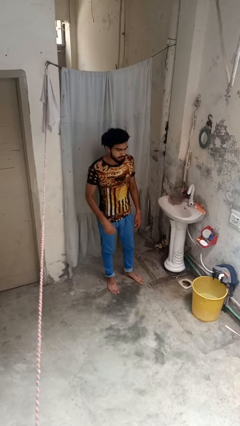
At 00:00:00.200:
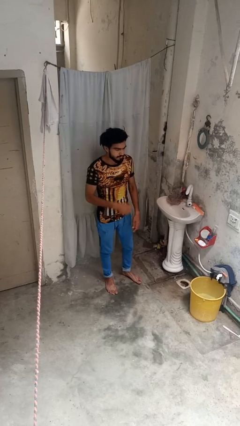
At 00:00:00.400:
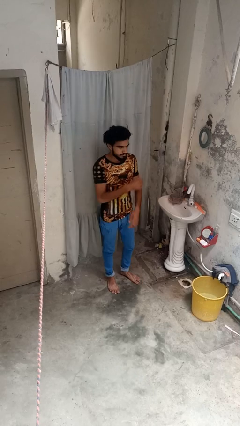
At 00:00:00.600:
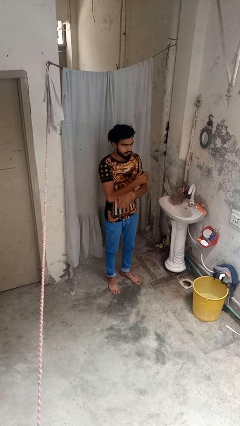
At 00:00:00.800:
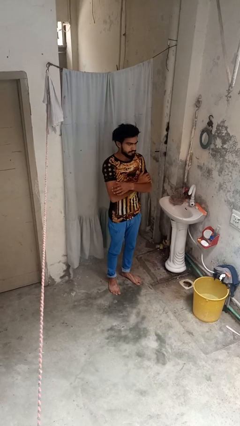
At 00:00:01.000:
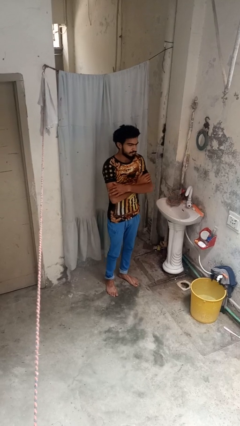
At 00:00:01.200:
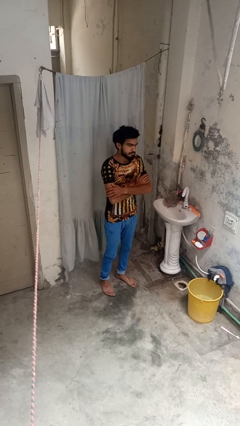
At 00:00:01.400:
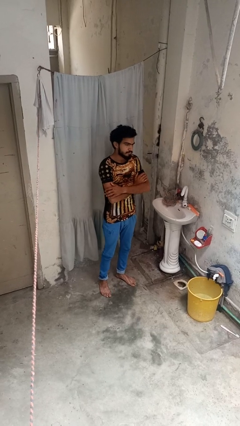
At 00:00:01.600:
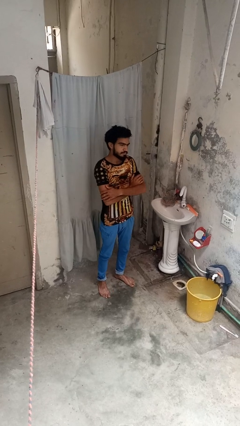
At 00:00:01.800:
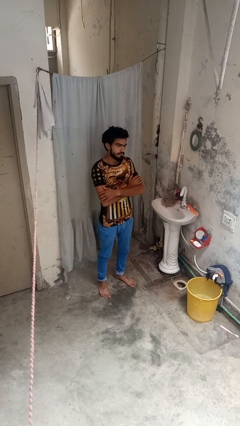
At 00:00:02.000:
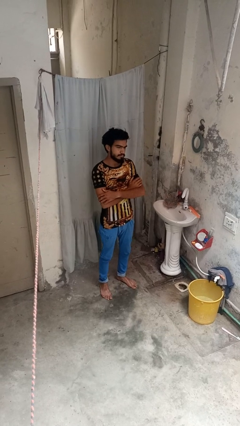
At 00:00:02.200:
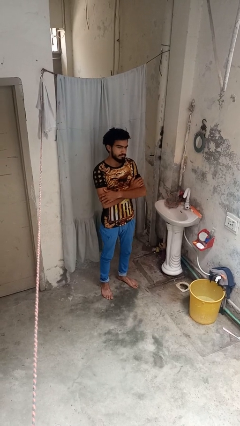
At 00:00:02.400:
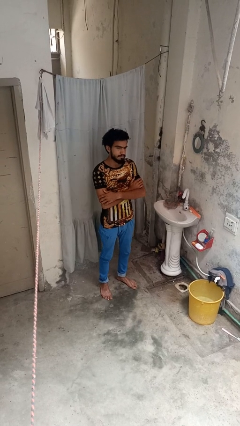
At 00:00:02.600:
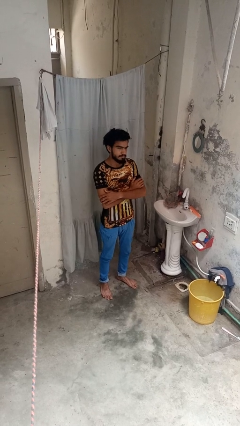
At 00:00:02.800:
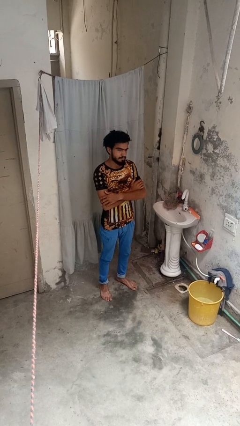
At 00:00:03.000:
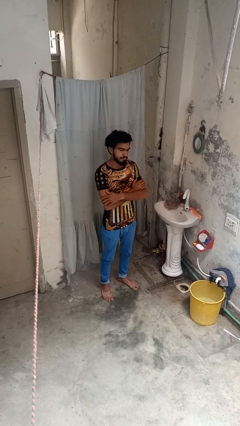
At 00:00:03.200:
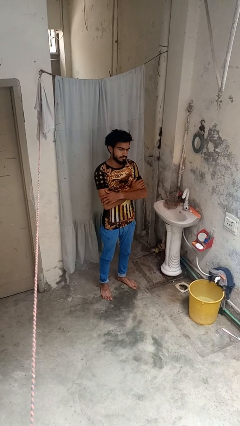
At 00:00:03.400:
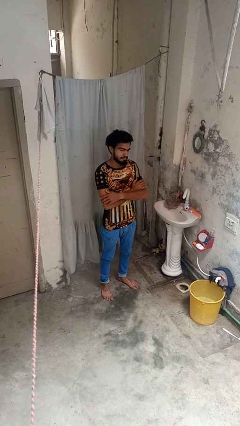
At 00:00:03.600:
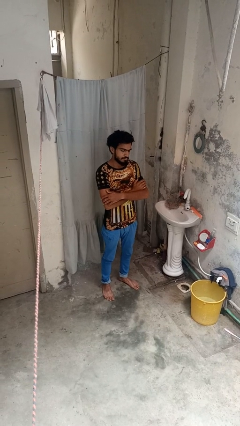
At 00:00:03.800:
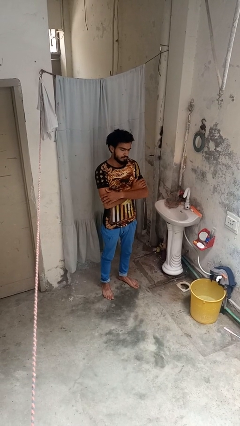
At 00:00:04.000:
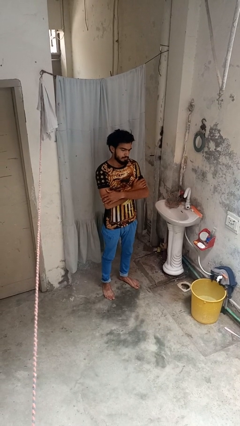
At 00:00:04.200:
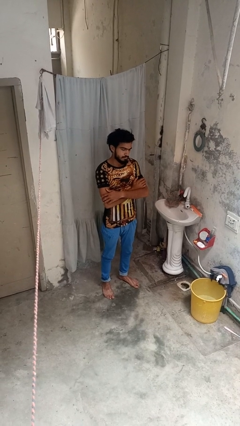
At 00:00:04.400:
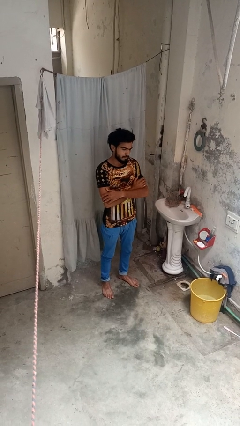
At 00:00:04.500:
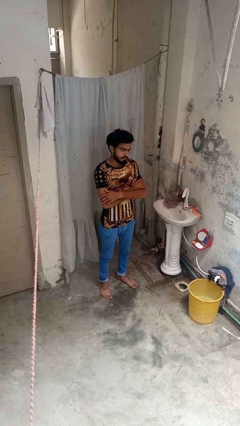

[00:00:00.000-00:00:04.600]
person crosses arms

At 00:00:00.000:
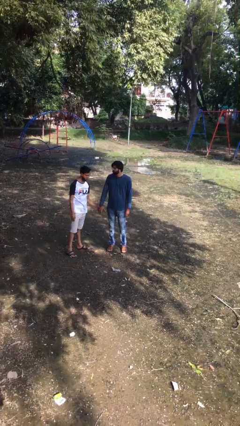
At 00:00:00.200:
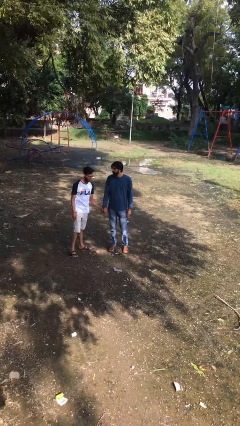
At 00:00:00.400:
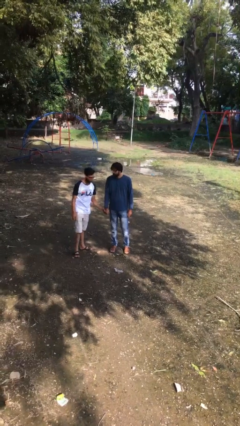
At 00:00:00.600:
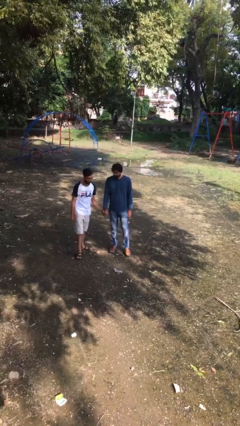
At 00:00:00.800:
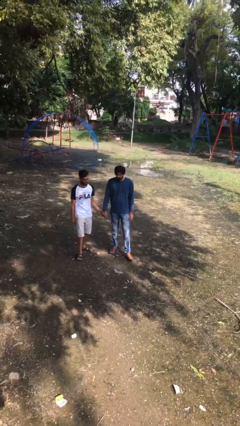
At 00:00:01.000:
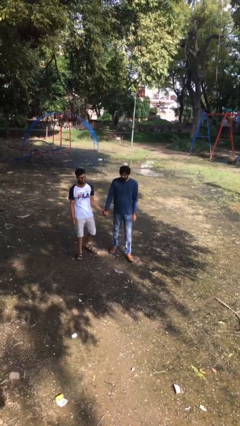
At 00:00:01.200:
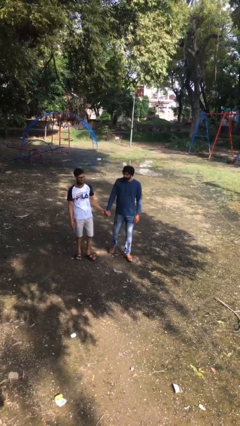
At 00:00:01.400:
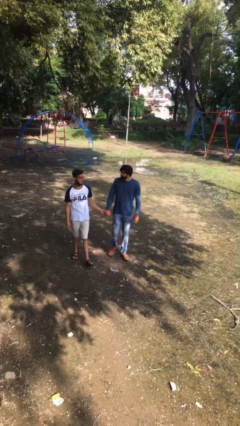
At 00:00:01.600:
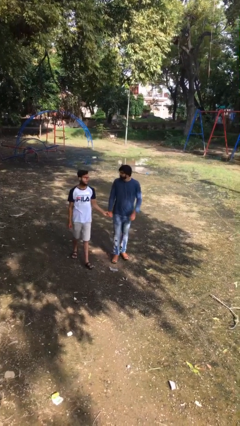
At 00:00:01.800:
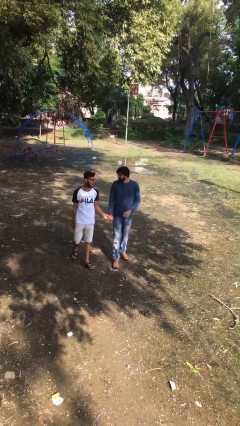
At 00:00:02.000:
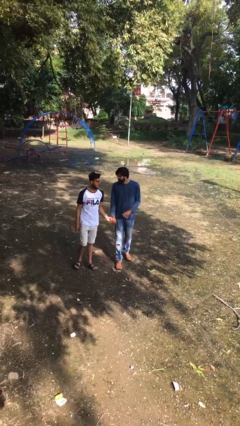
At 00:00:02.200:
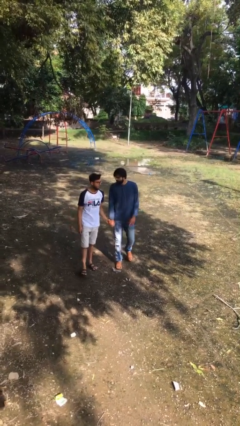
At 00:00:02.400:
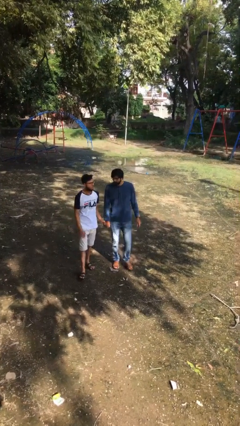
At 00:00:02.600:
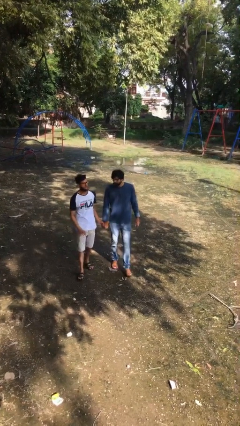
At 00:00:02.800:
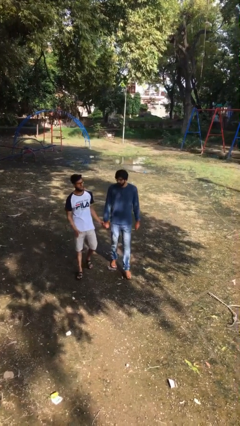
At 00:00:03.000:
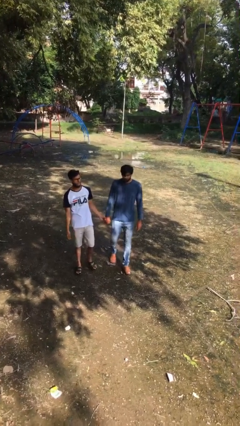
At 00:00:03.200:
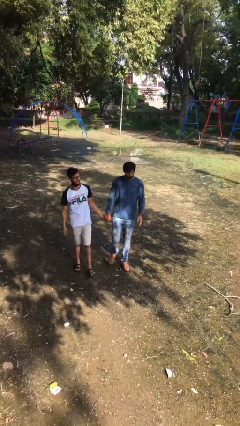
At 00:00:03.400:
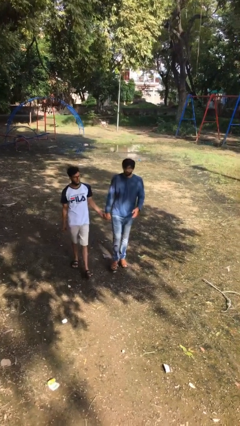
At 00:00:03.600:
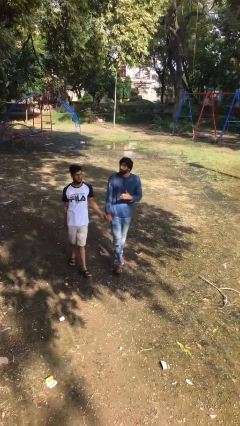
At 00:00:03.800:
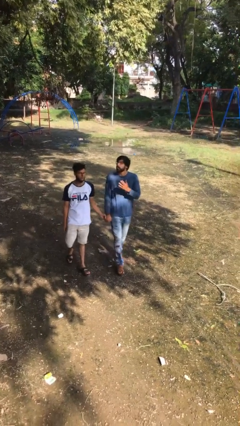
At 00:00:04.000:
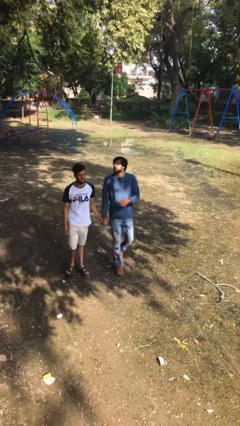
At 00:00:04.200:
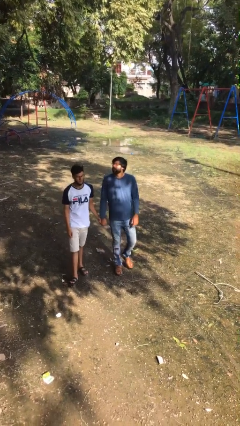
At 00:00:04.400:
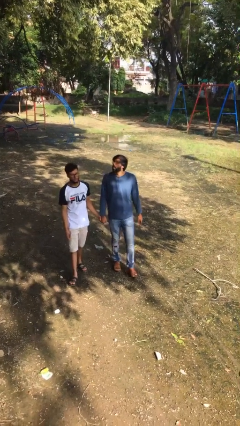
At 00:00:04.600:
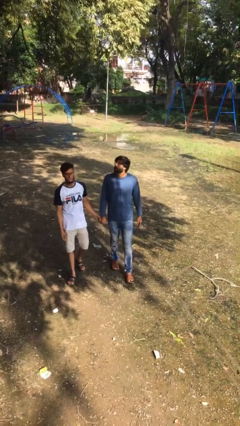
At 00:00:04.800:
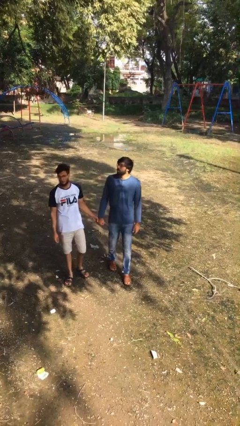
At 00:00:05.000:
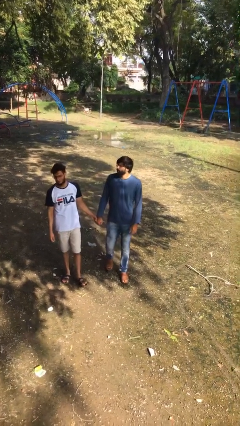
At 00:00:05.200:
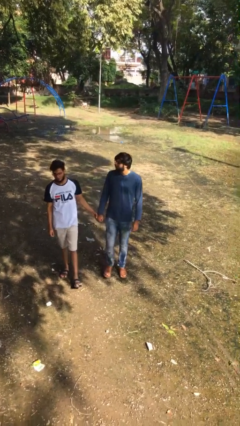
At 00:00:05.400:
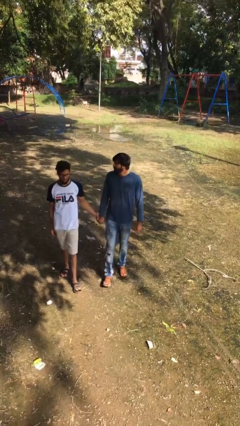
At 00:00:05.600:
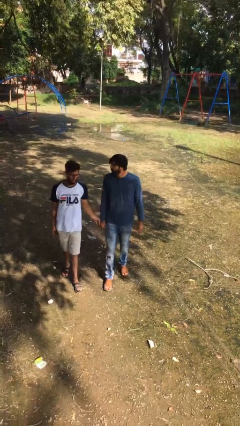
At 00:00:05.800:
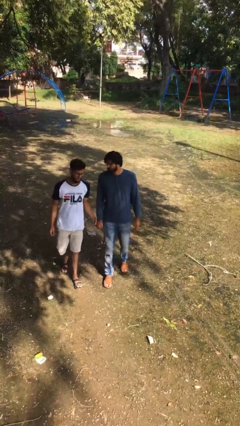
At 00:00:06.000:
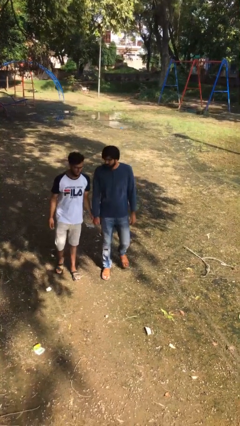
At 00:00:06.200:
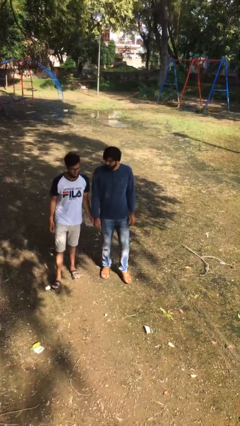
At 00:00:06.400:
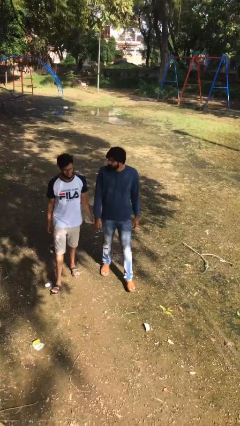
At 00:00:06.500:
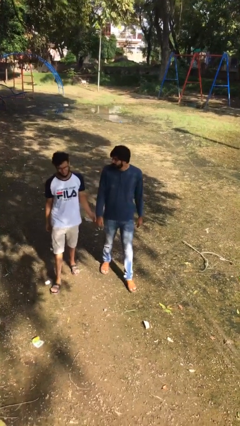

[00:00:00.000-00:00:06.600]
person holds hand

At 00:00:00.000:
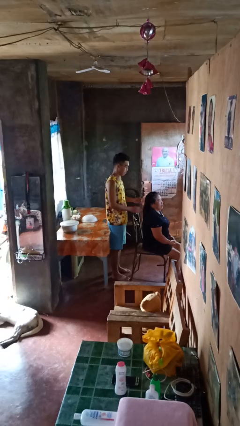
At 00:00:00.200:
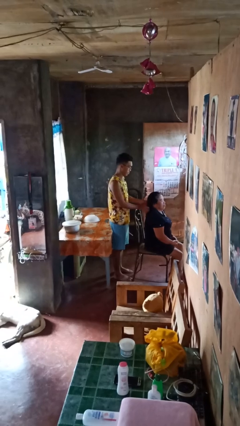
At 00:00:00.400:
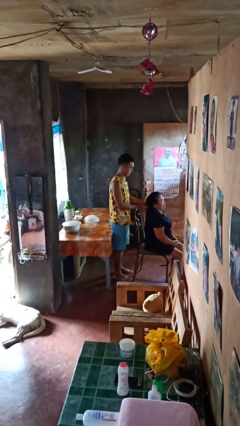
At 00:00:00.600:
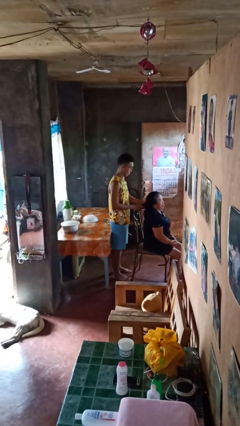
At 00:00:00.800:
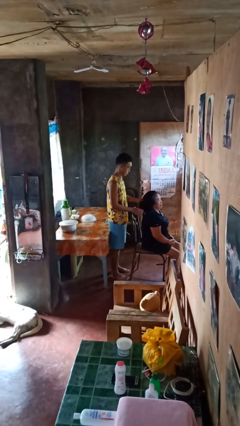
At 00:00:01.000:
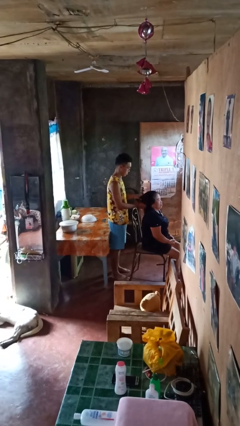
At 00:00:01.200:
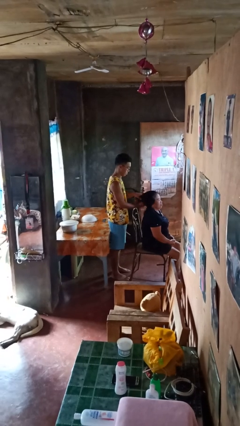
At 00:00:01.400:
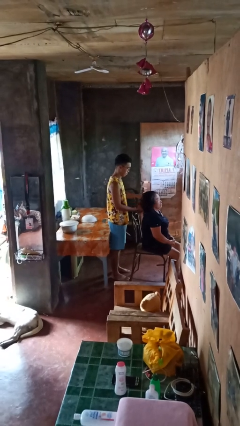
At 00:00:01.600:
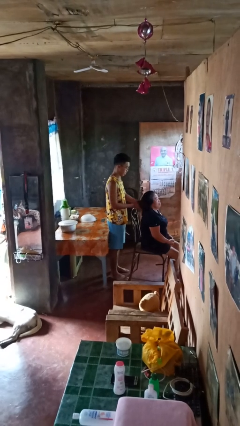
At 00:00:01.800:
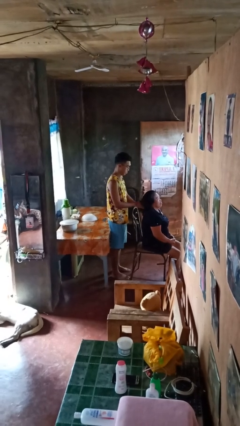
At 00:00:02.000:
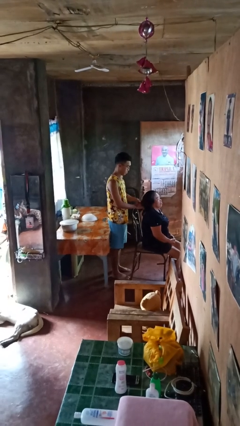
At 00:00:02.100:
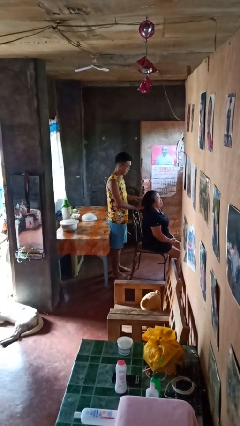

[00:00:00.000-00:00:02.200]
person braids hair of person

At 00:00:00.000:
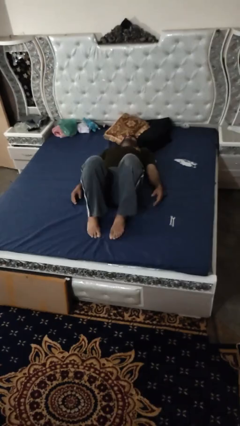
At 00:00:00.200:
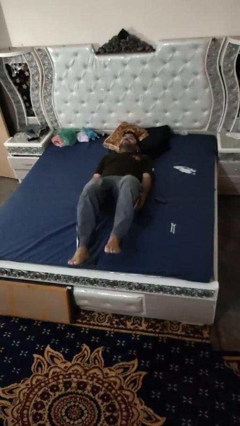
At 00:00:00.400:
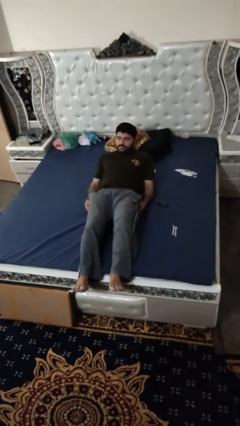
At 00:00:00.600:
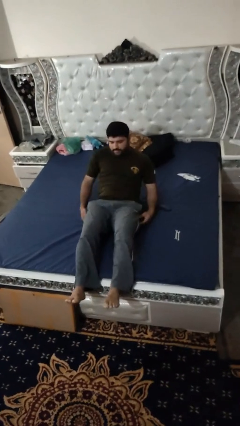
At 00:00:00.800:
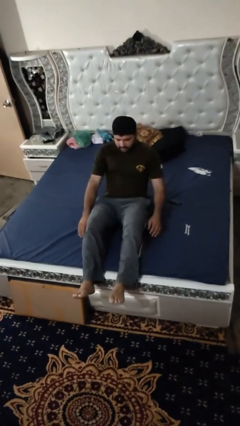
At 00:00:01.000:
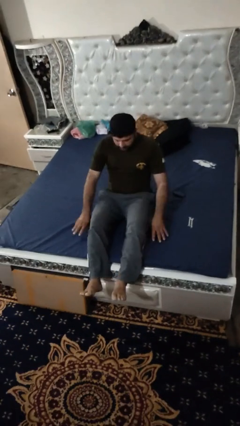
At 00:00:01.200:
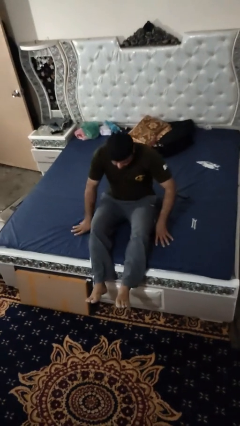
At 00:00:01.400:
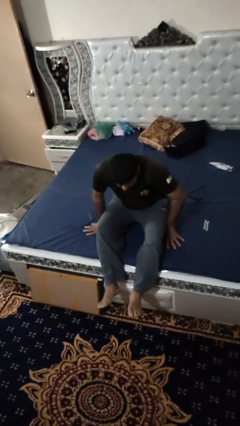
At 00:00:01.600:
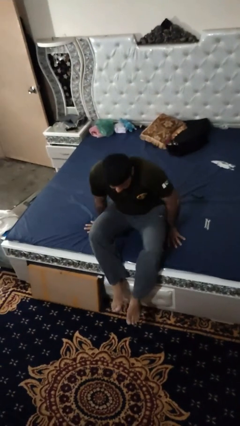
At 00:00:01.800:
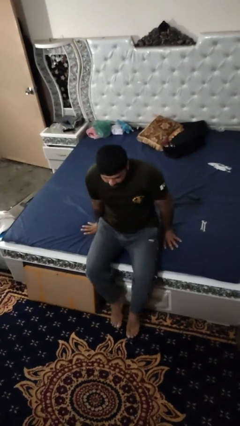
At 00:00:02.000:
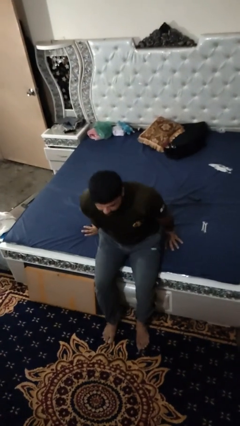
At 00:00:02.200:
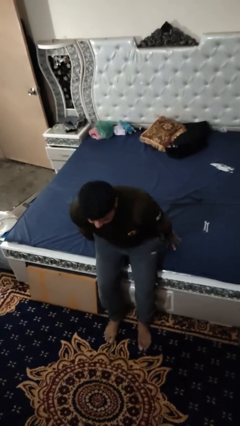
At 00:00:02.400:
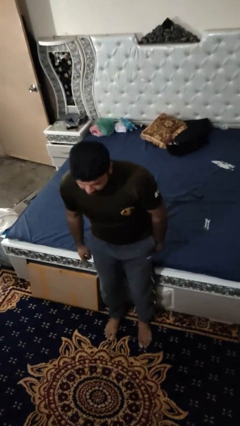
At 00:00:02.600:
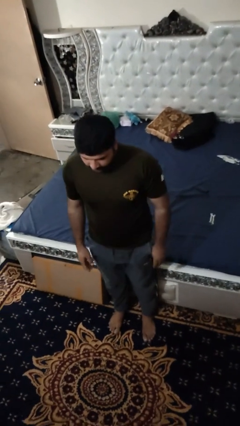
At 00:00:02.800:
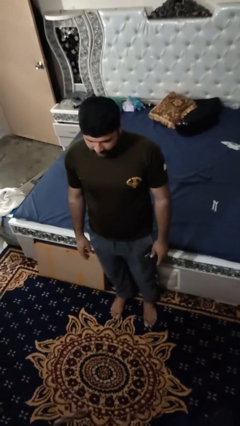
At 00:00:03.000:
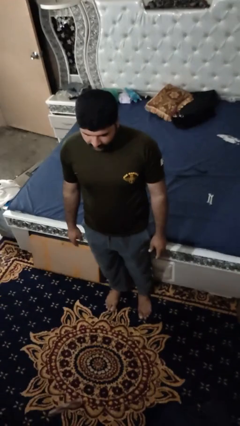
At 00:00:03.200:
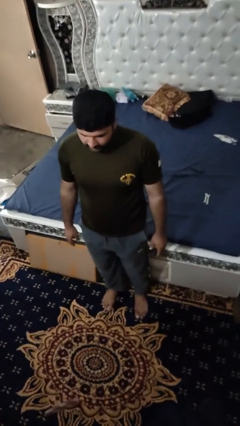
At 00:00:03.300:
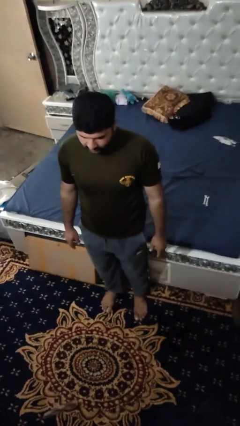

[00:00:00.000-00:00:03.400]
person stands up

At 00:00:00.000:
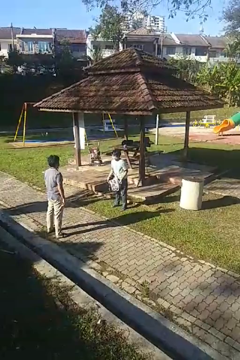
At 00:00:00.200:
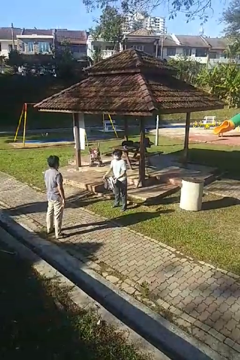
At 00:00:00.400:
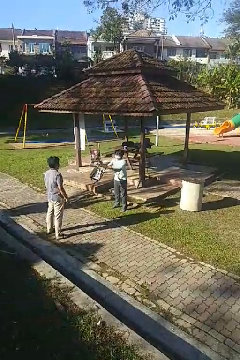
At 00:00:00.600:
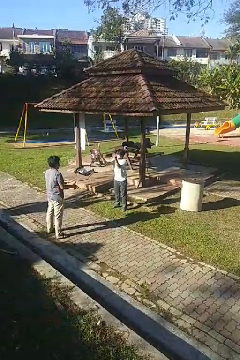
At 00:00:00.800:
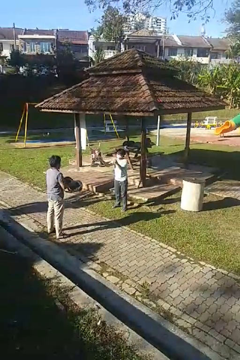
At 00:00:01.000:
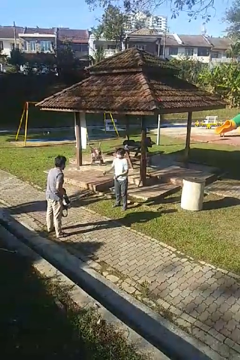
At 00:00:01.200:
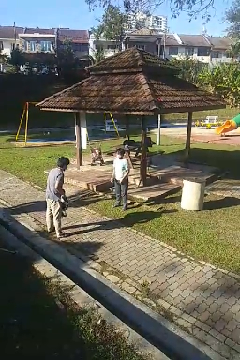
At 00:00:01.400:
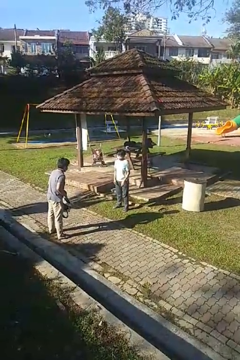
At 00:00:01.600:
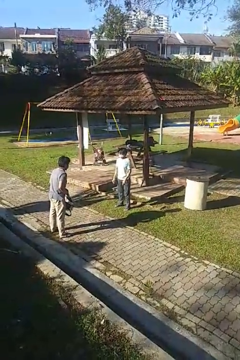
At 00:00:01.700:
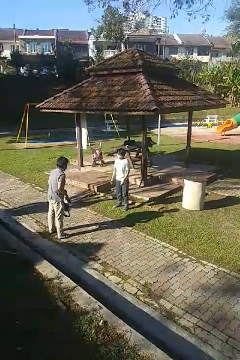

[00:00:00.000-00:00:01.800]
person throws object to person
